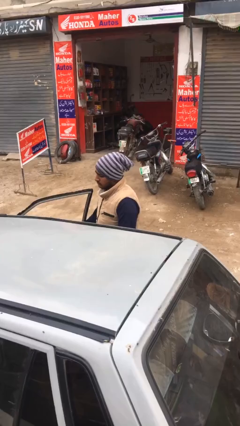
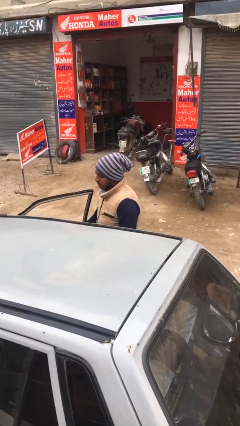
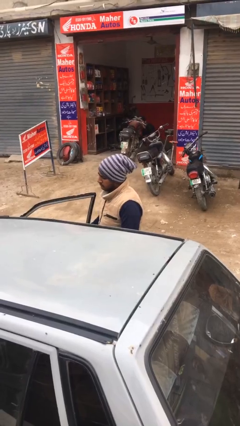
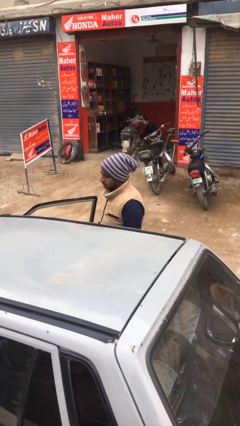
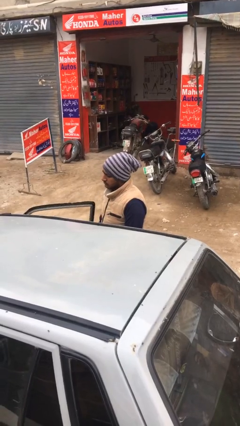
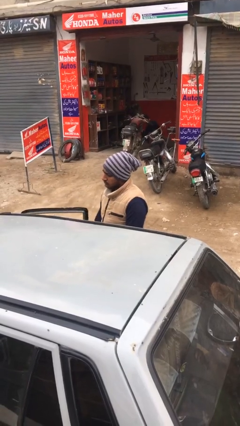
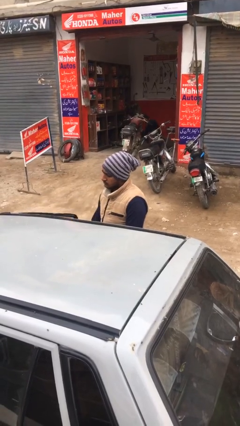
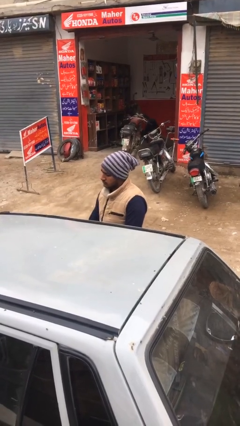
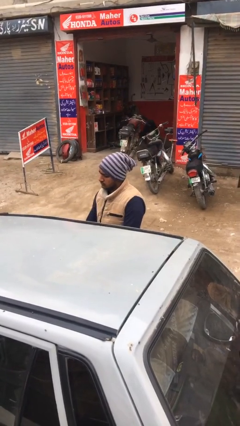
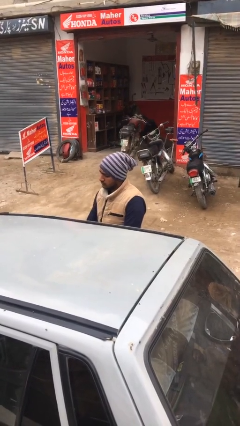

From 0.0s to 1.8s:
person closes car door

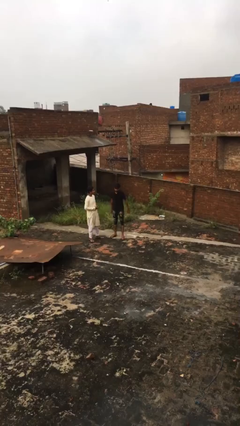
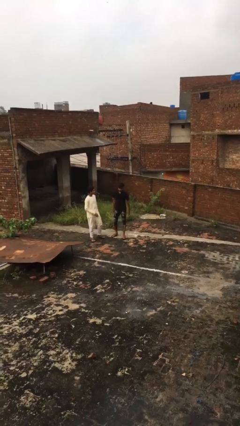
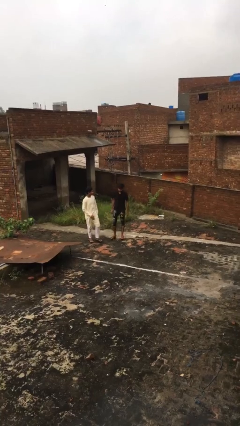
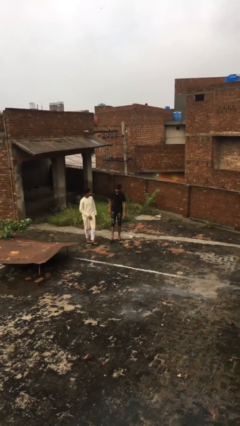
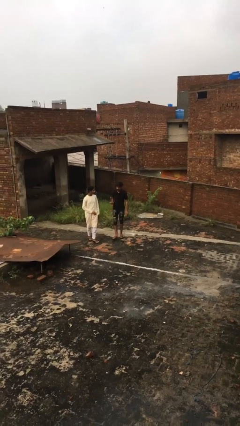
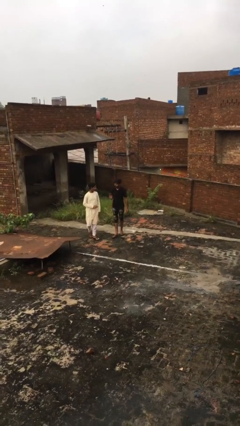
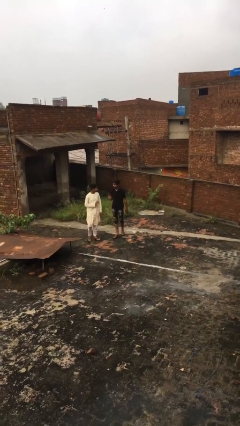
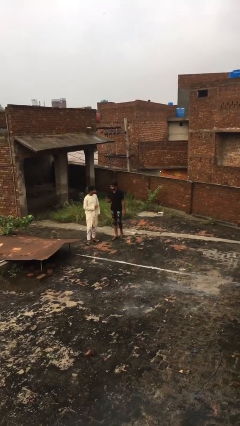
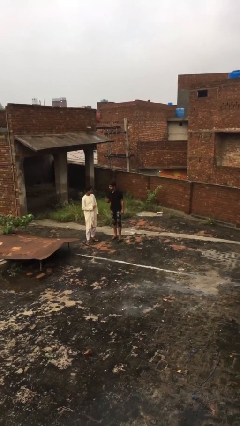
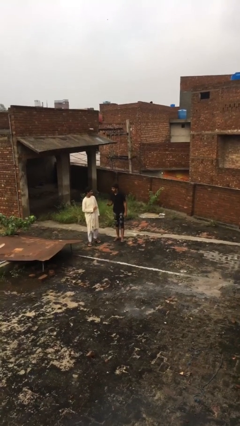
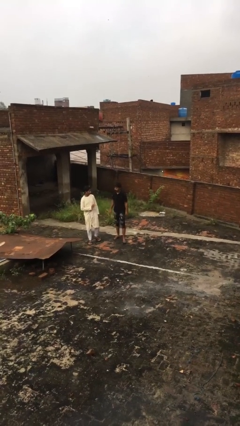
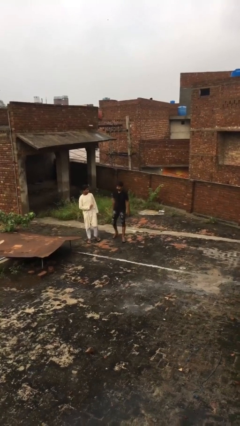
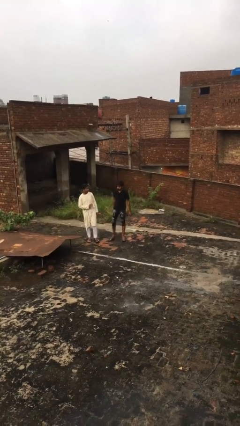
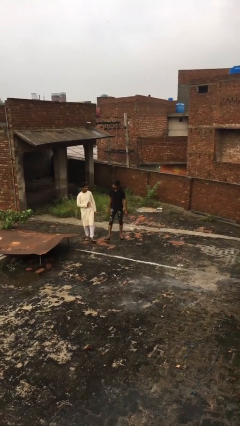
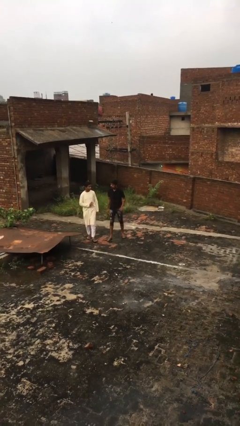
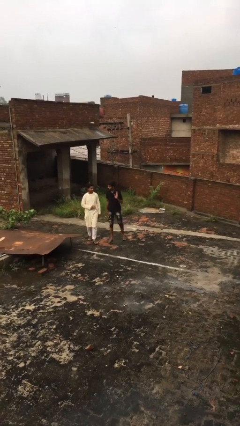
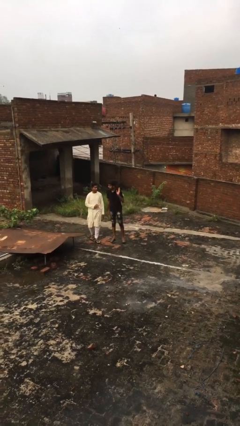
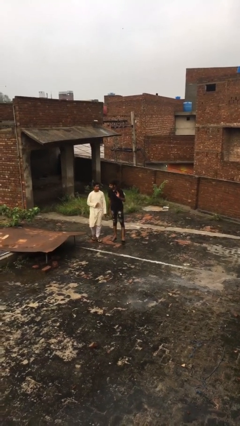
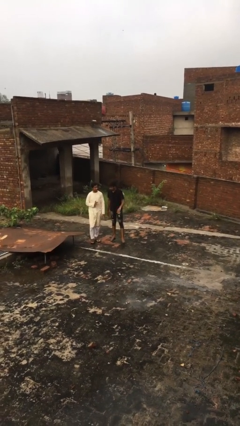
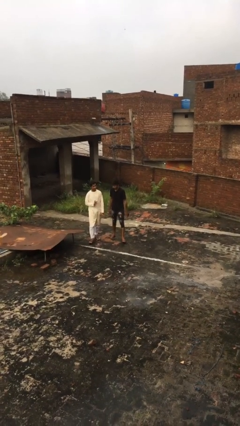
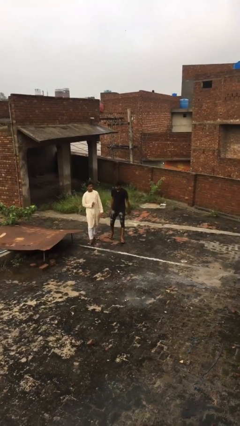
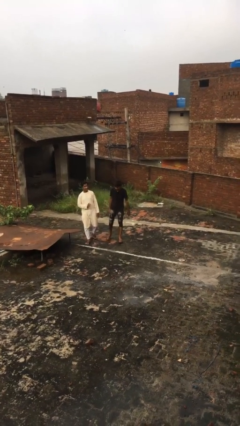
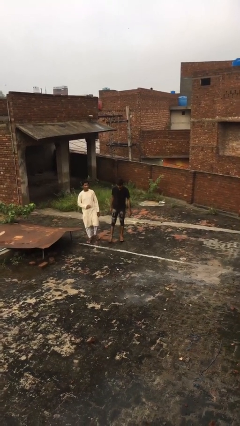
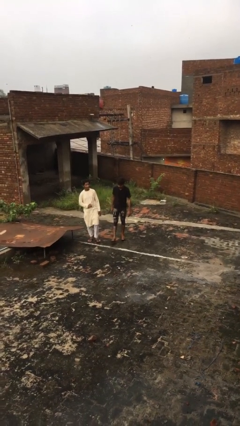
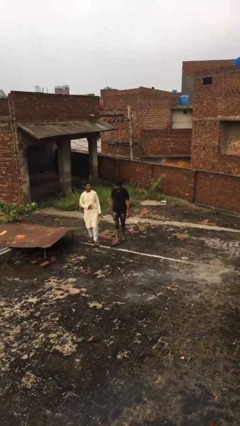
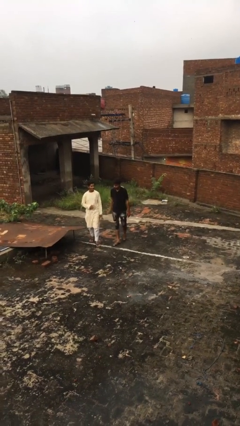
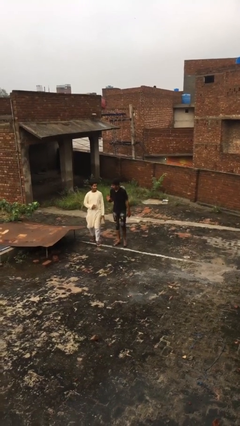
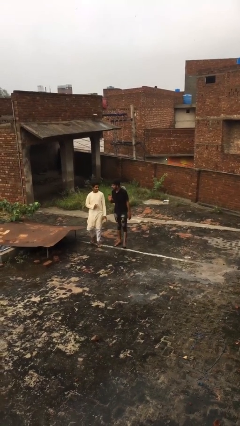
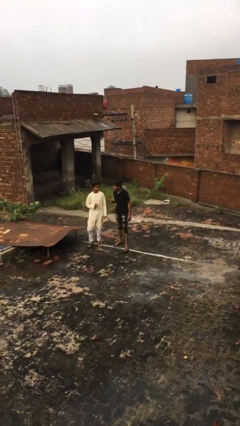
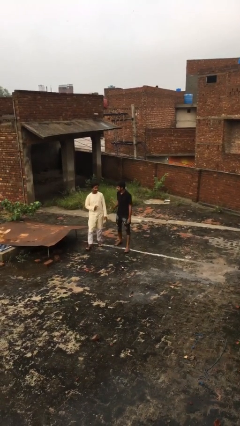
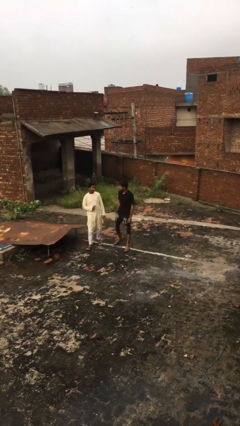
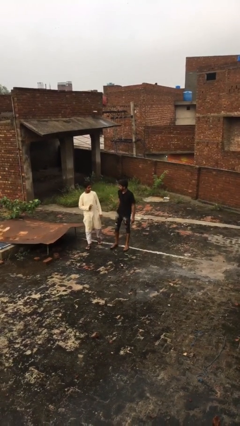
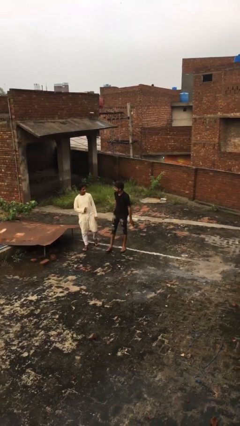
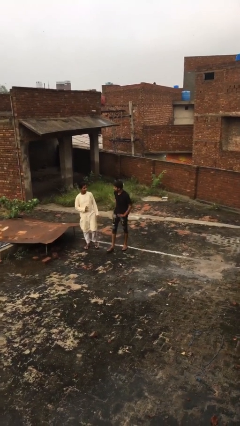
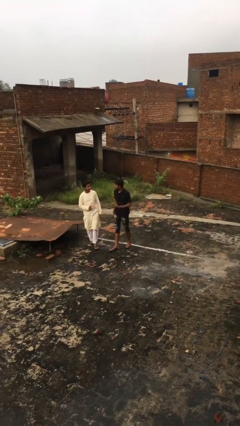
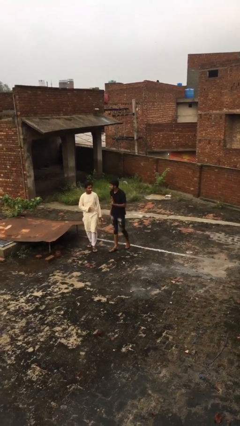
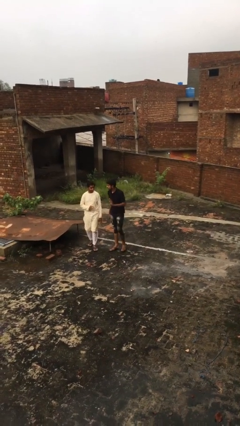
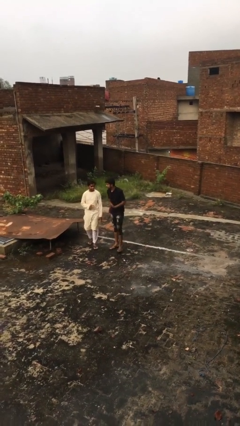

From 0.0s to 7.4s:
person talks to person

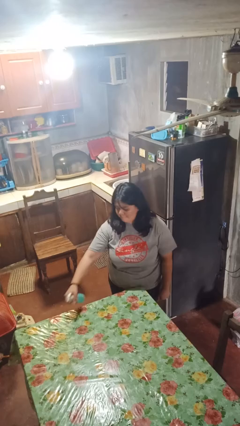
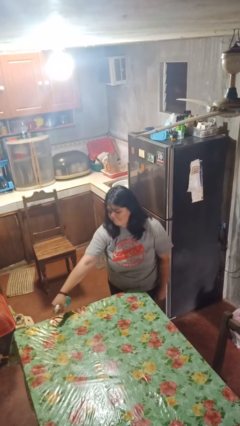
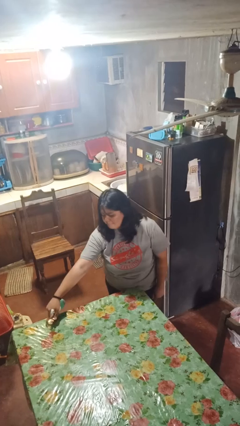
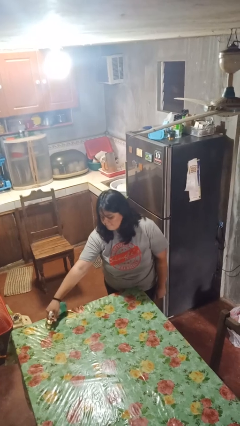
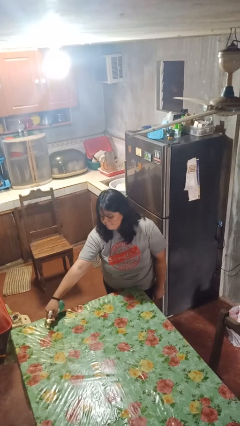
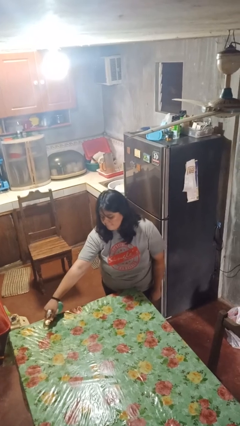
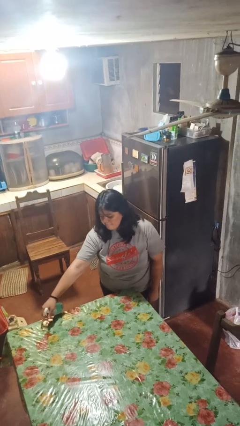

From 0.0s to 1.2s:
person sprays from bottle

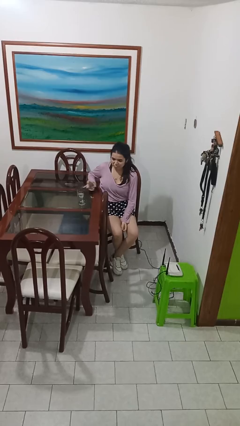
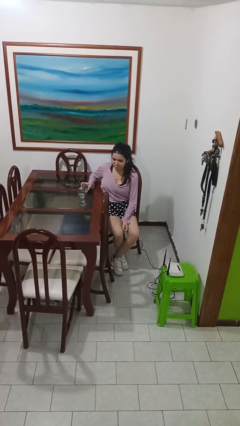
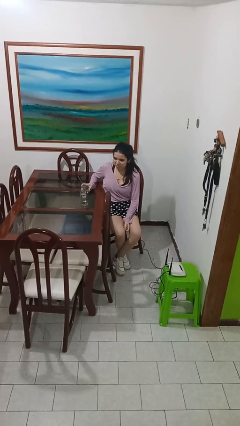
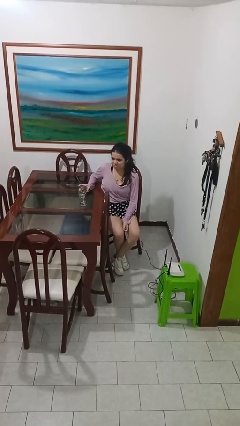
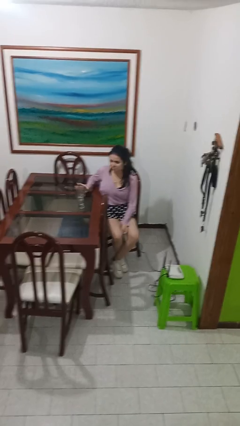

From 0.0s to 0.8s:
person puts down object on table

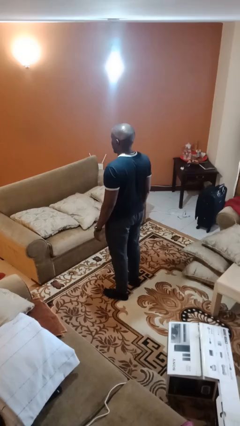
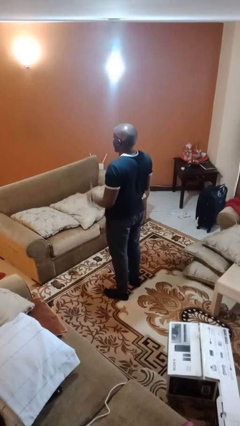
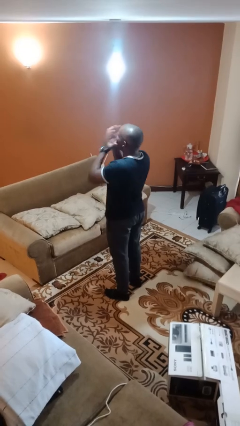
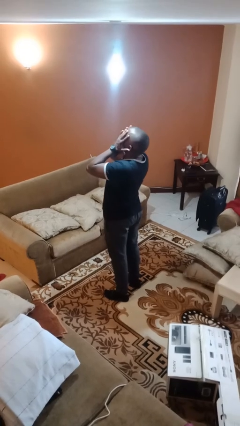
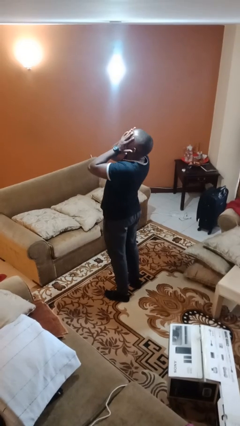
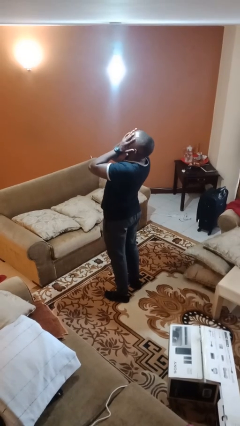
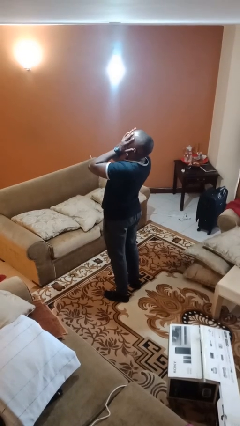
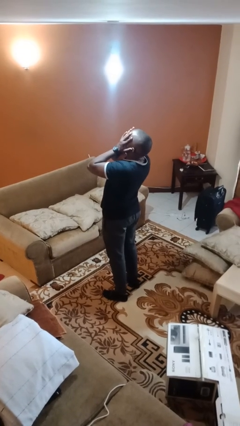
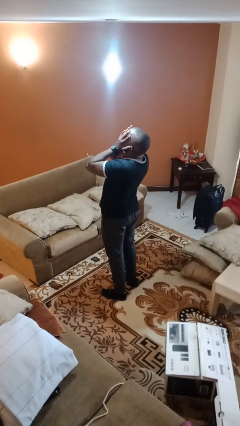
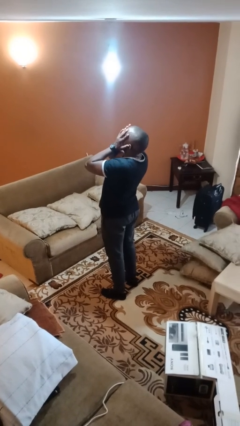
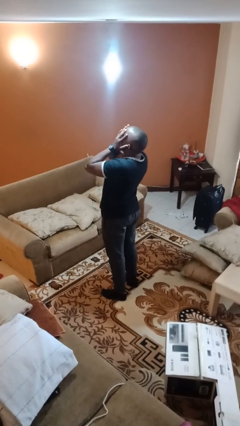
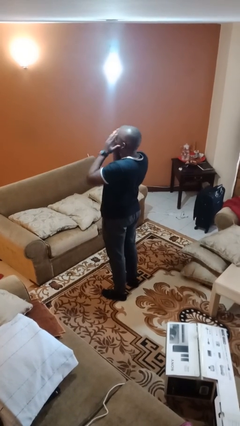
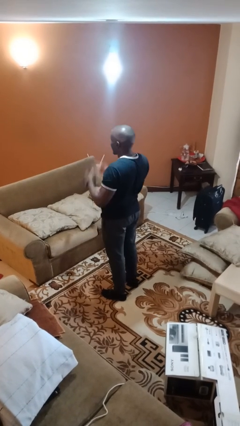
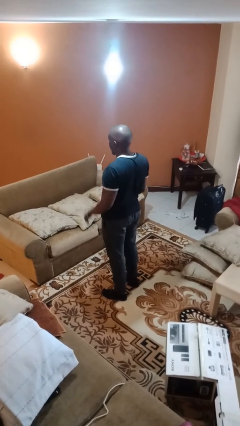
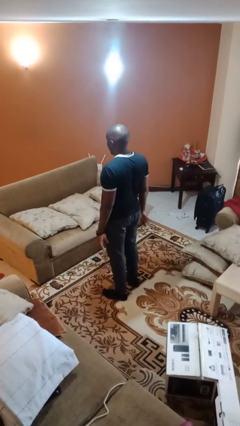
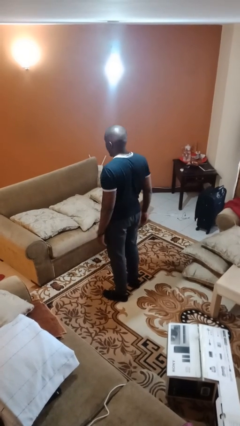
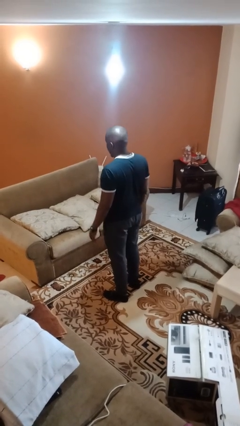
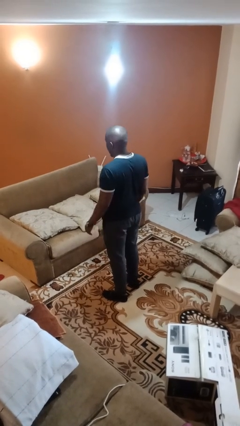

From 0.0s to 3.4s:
person covers face with hands

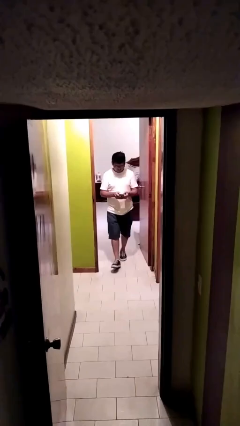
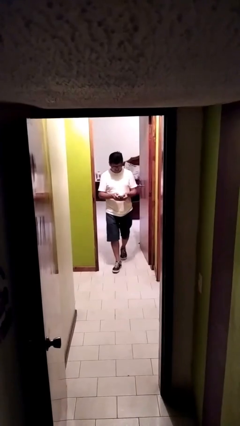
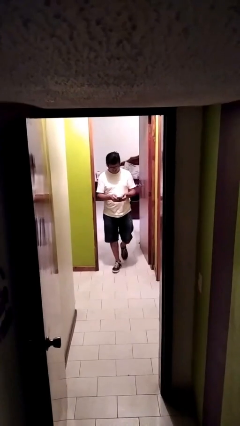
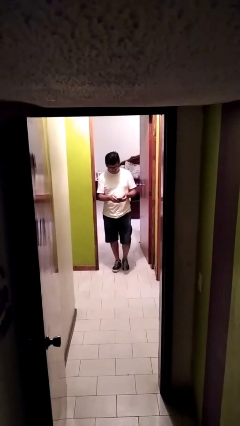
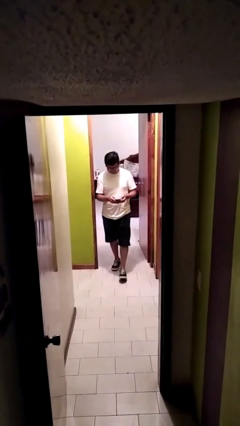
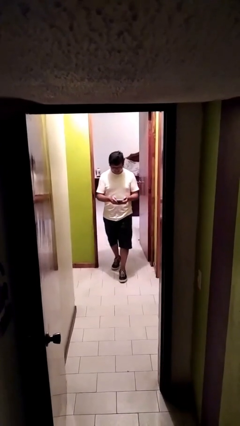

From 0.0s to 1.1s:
person enters scene through structure

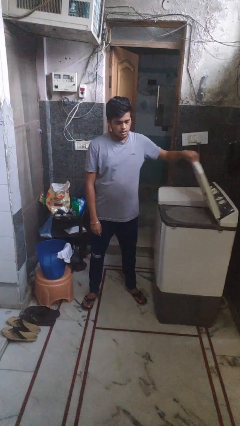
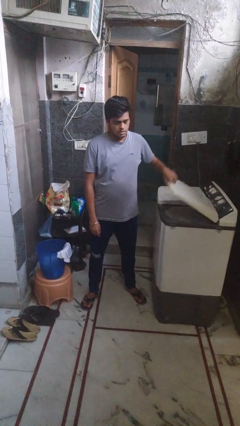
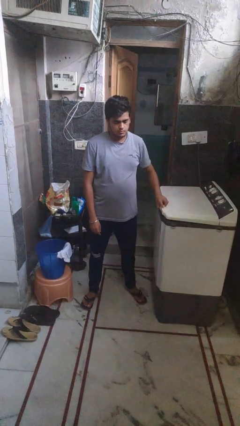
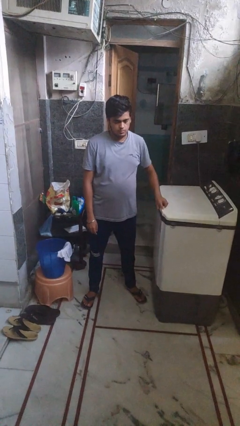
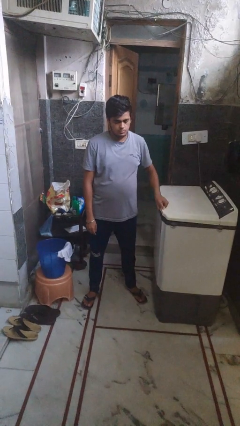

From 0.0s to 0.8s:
person closes clothes washer

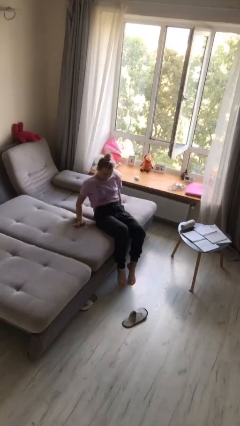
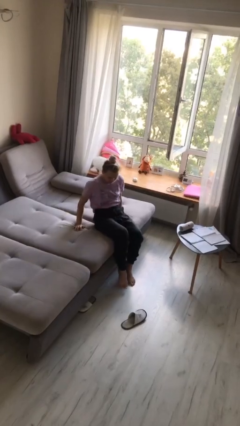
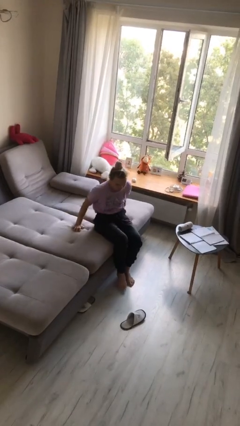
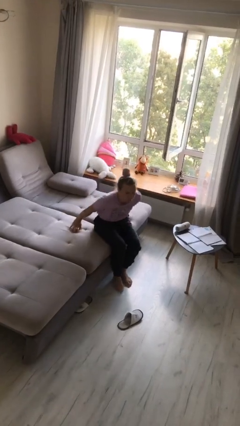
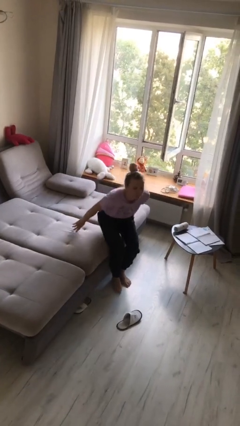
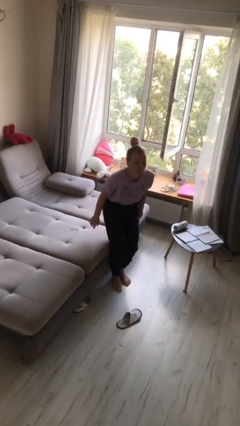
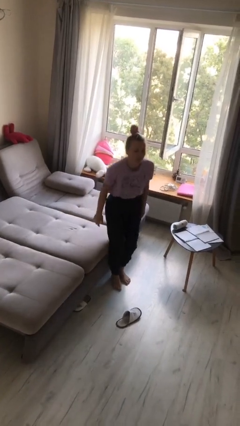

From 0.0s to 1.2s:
person stands up
